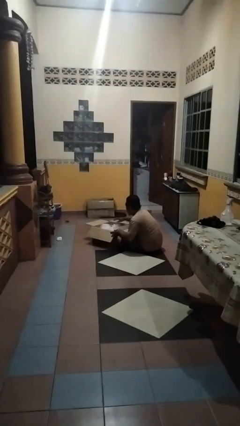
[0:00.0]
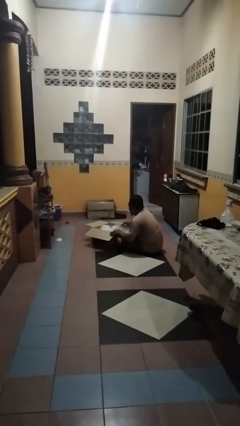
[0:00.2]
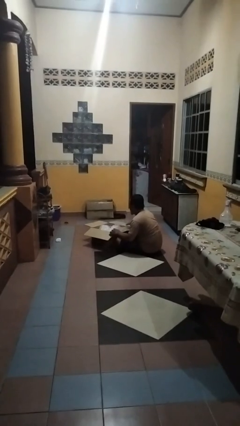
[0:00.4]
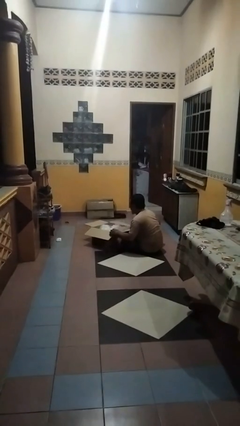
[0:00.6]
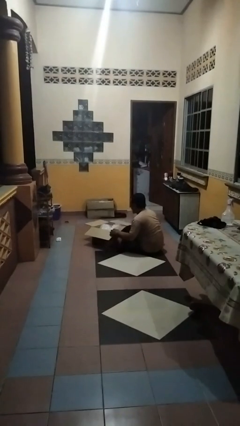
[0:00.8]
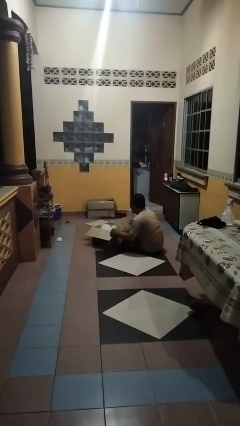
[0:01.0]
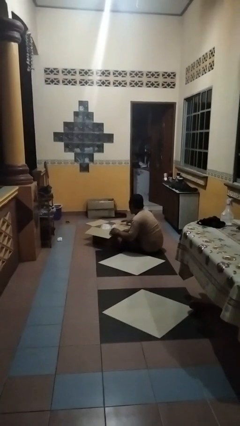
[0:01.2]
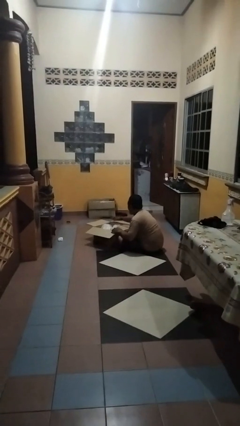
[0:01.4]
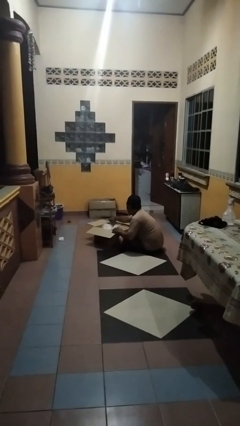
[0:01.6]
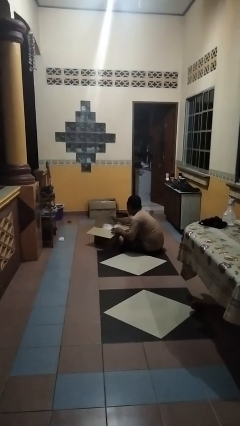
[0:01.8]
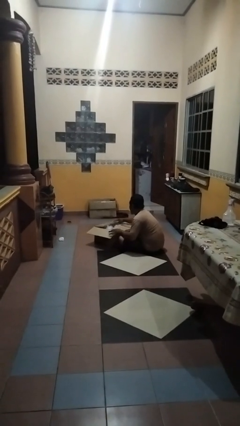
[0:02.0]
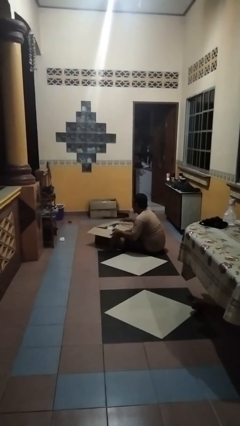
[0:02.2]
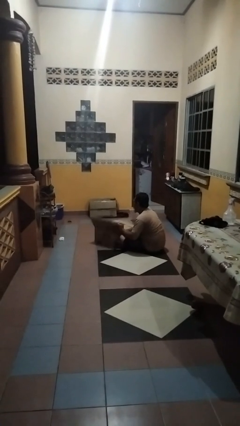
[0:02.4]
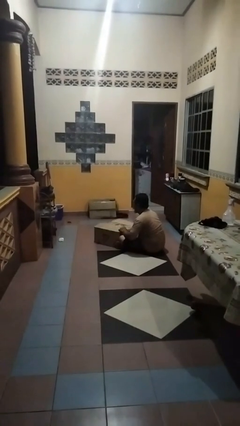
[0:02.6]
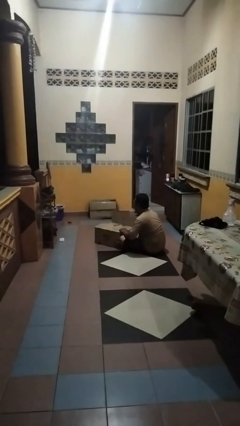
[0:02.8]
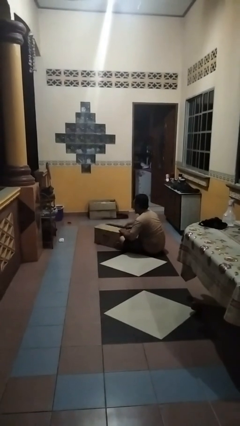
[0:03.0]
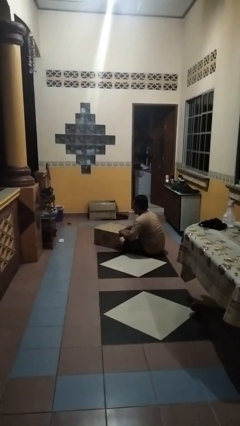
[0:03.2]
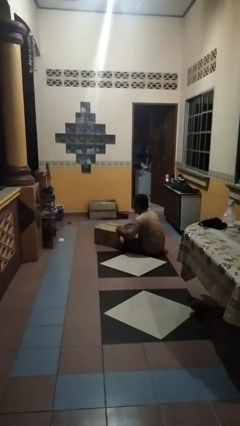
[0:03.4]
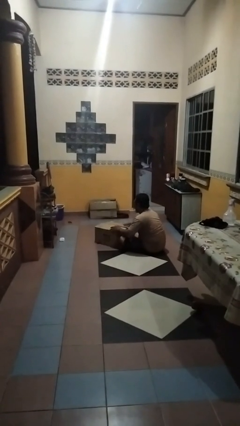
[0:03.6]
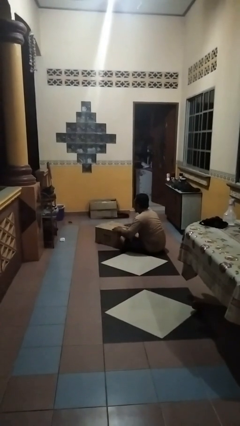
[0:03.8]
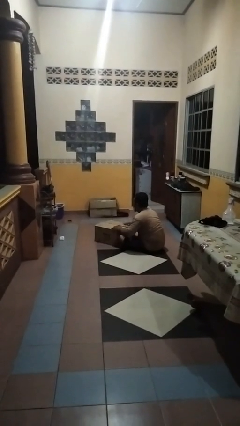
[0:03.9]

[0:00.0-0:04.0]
person closes box

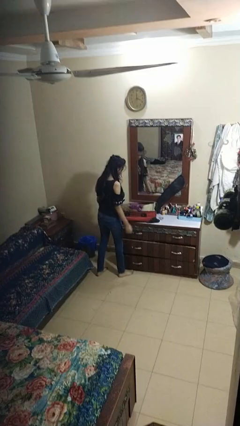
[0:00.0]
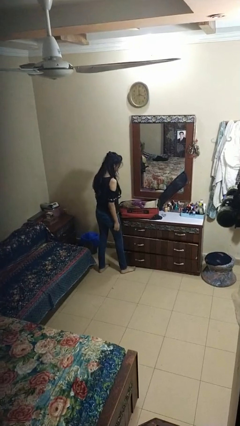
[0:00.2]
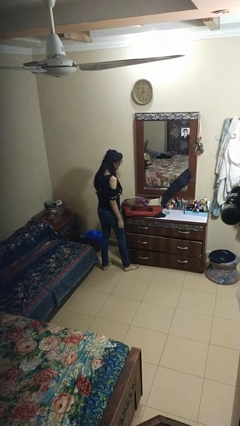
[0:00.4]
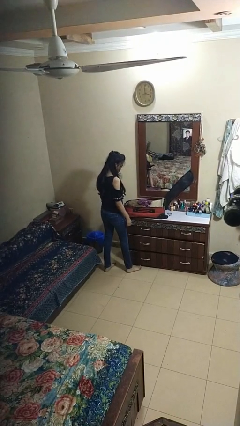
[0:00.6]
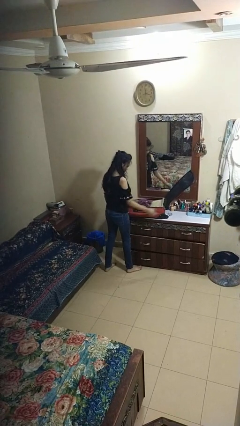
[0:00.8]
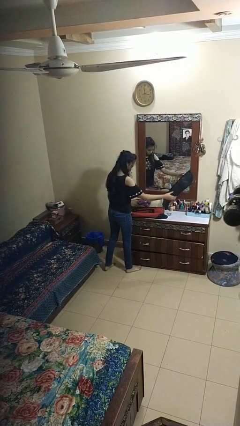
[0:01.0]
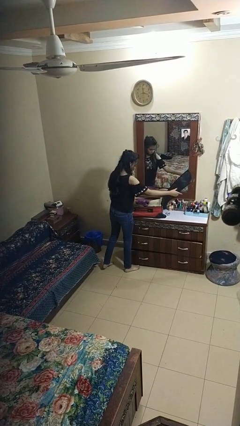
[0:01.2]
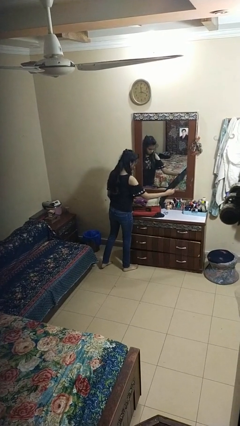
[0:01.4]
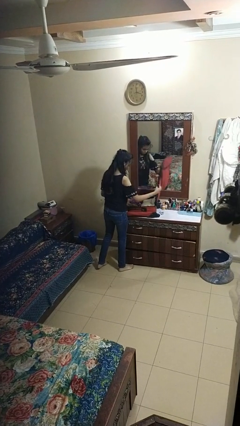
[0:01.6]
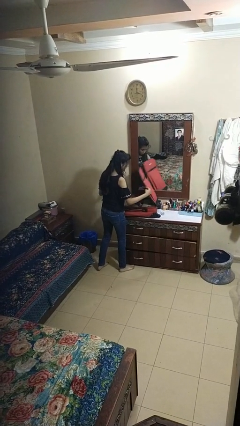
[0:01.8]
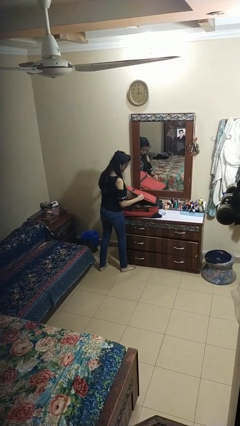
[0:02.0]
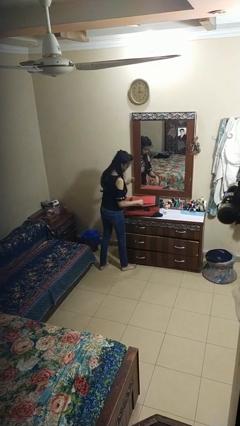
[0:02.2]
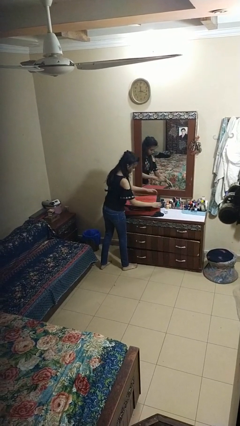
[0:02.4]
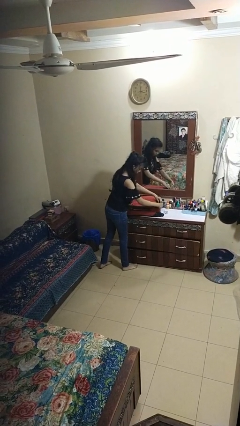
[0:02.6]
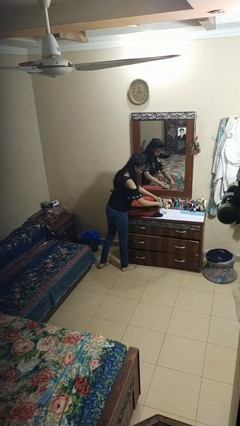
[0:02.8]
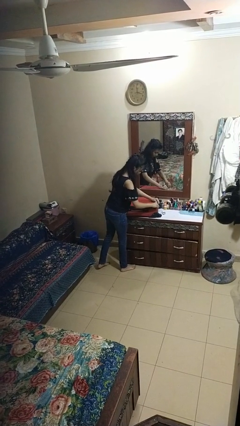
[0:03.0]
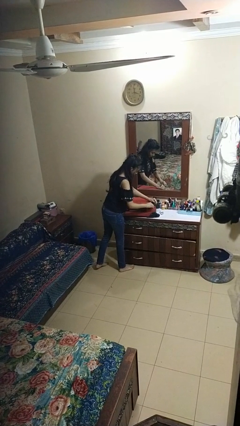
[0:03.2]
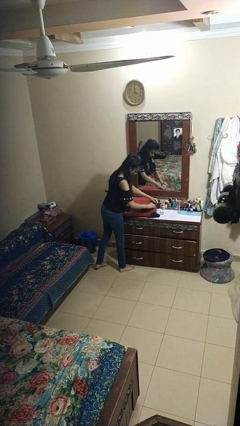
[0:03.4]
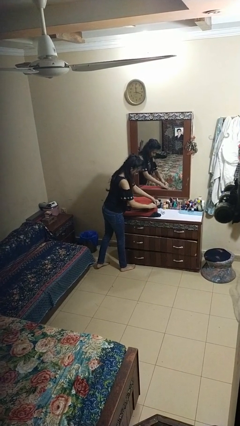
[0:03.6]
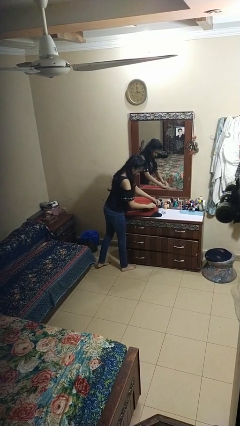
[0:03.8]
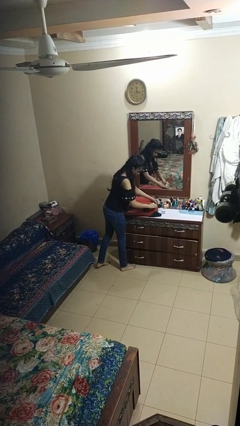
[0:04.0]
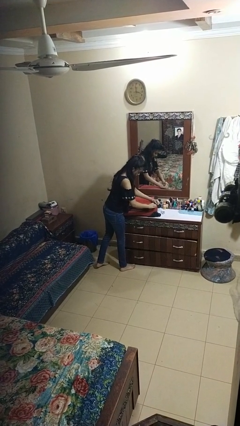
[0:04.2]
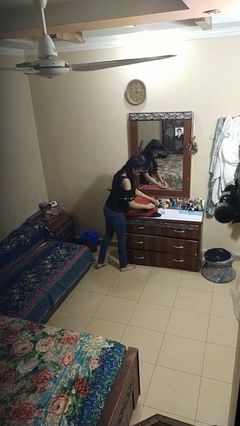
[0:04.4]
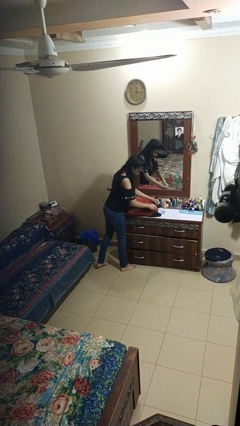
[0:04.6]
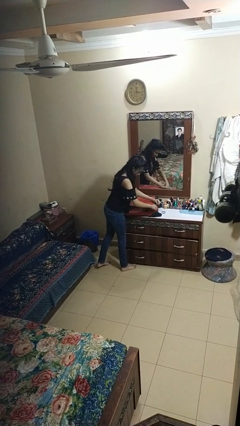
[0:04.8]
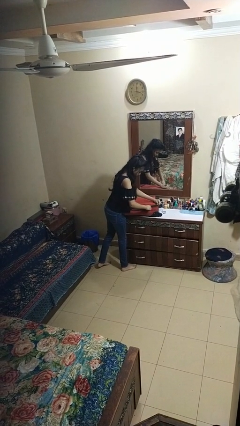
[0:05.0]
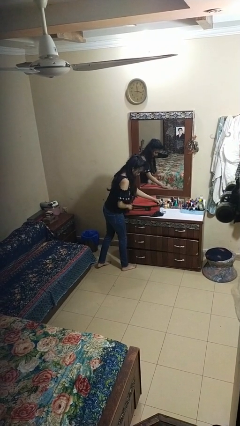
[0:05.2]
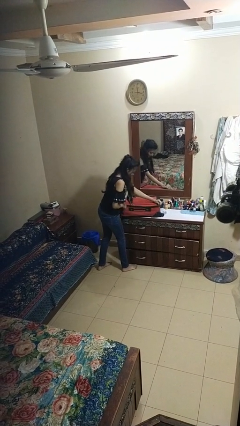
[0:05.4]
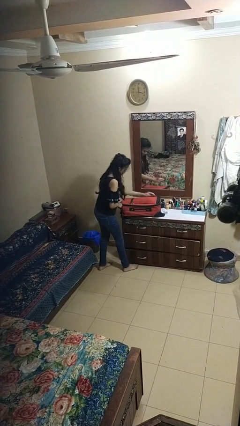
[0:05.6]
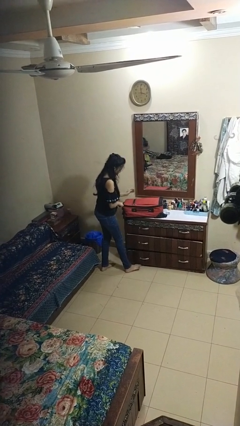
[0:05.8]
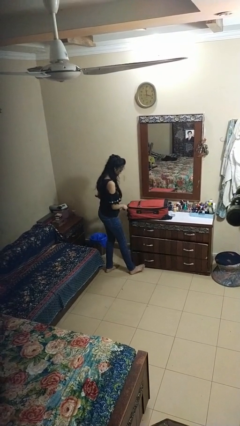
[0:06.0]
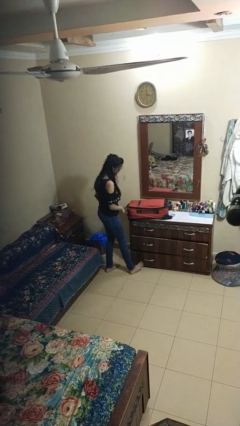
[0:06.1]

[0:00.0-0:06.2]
person closes suitcase

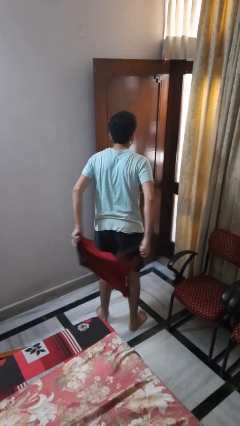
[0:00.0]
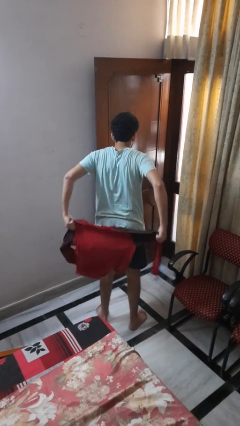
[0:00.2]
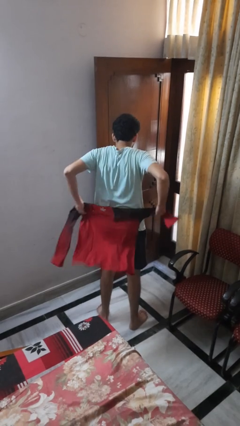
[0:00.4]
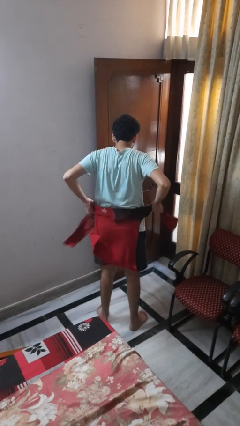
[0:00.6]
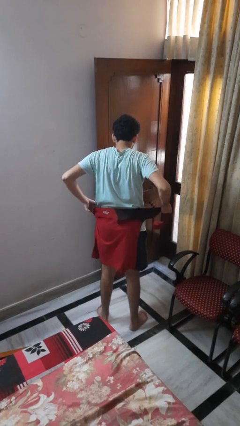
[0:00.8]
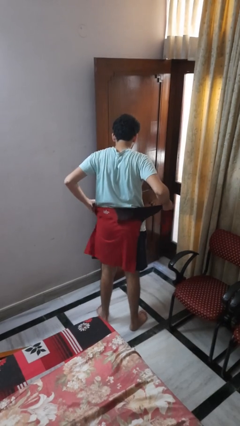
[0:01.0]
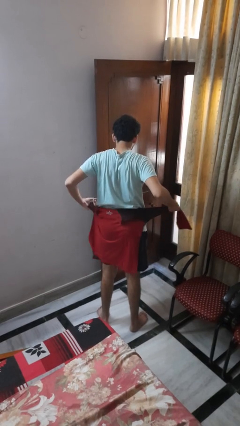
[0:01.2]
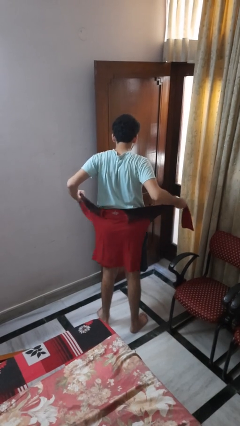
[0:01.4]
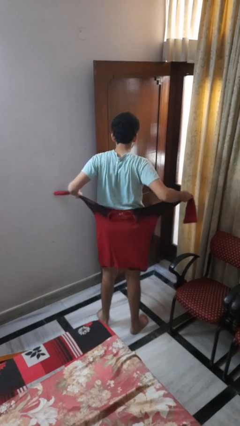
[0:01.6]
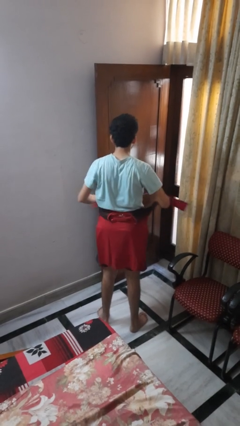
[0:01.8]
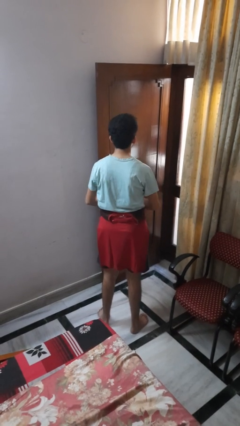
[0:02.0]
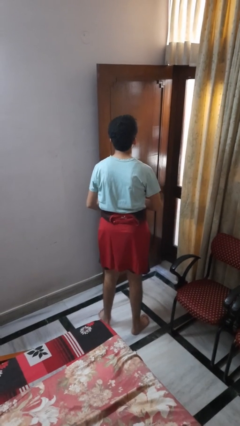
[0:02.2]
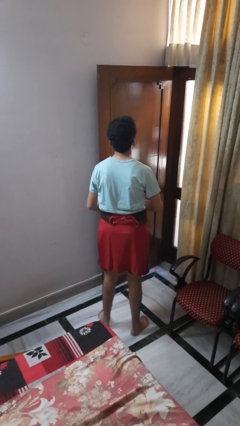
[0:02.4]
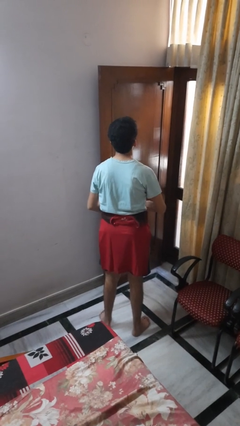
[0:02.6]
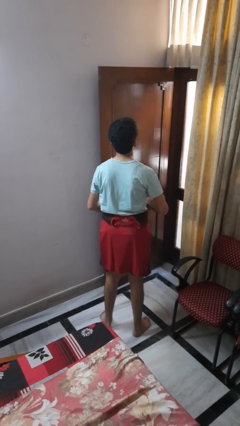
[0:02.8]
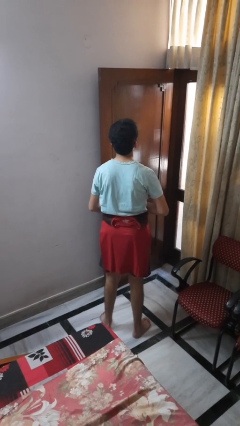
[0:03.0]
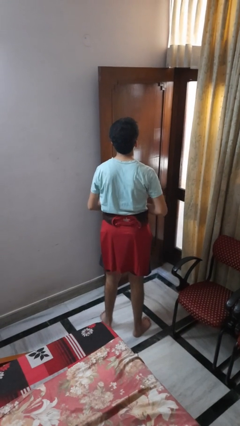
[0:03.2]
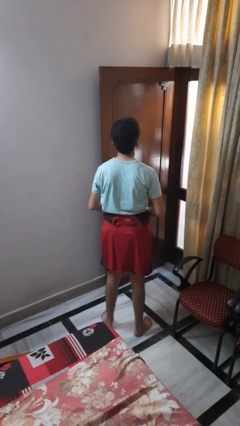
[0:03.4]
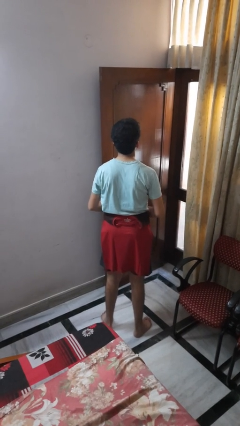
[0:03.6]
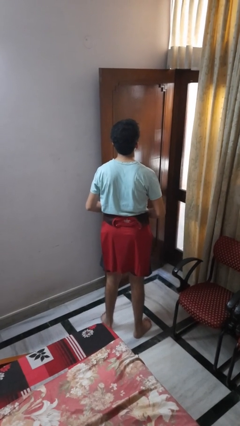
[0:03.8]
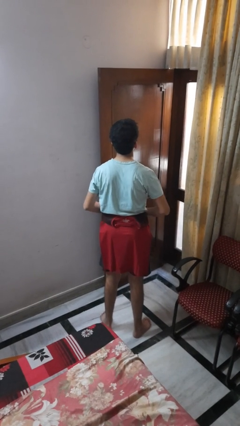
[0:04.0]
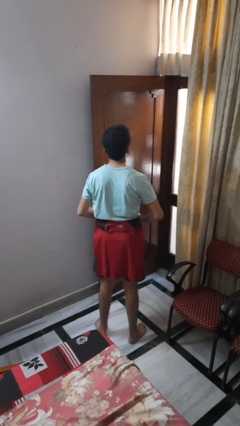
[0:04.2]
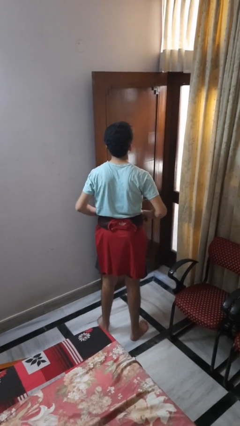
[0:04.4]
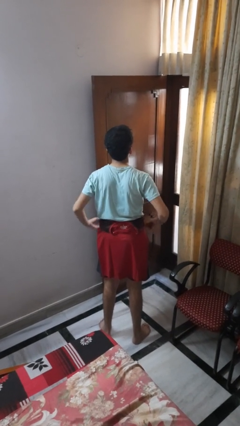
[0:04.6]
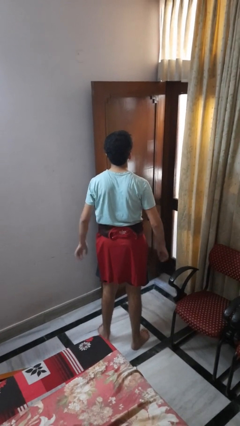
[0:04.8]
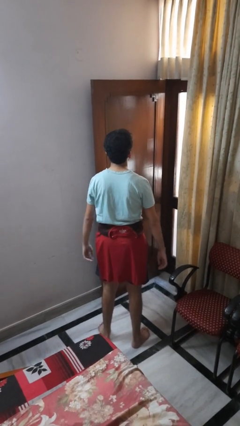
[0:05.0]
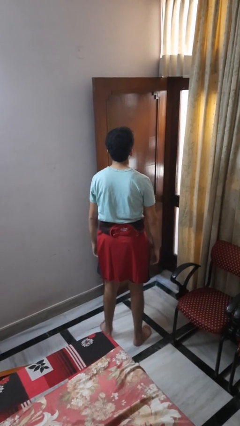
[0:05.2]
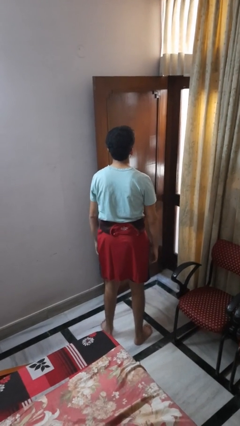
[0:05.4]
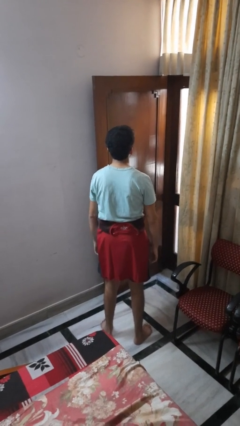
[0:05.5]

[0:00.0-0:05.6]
person ties jacket around waist

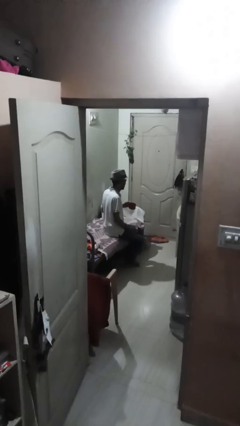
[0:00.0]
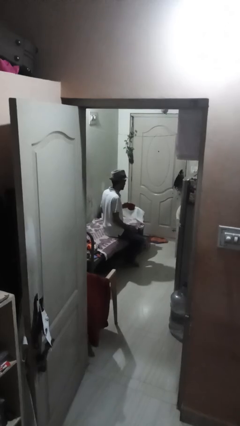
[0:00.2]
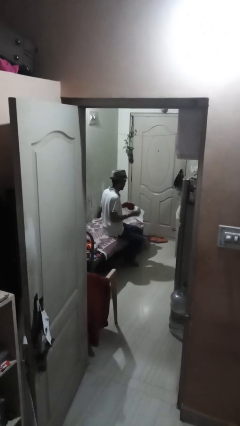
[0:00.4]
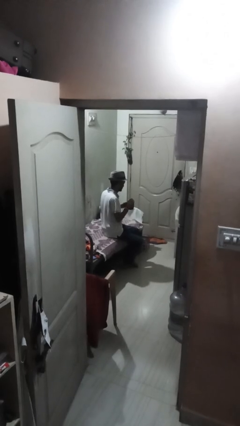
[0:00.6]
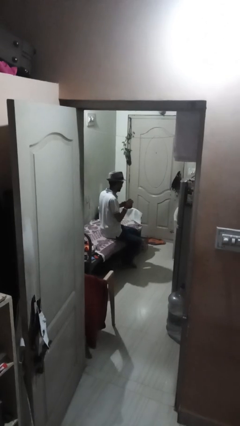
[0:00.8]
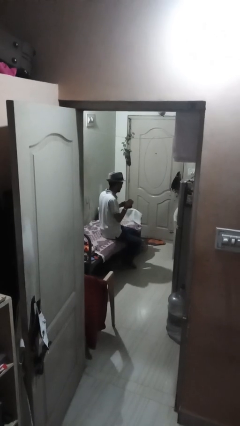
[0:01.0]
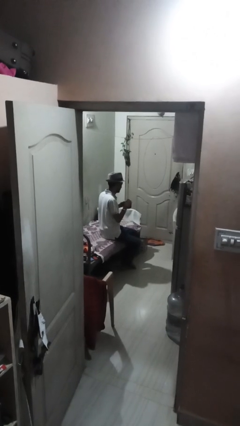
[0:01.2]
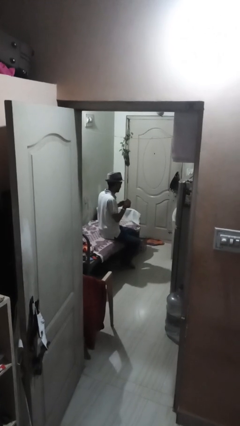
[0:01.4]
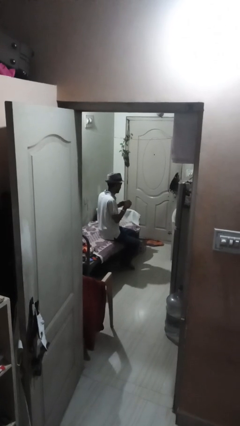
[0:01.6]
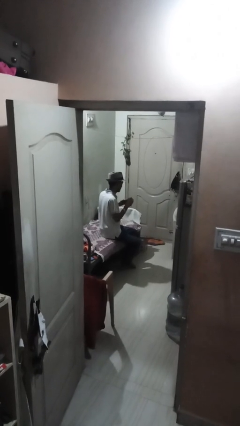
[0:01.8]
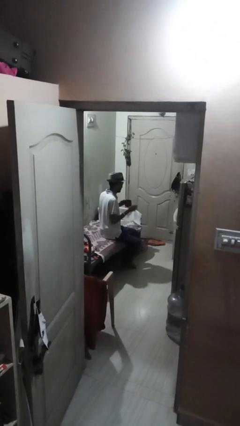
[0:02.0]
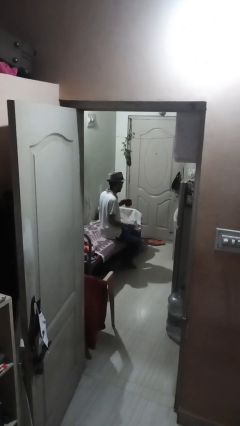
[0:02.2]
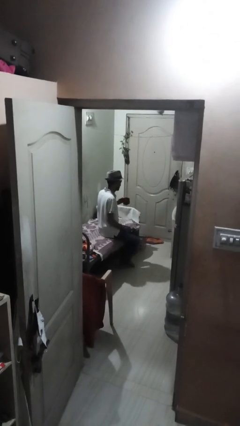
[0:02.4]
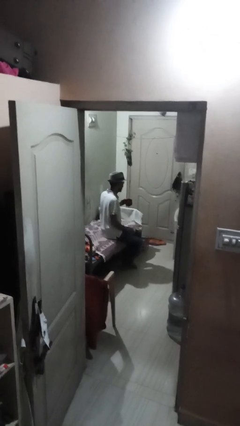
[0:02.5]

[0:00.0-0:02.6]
person stirs mug
